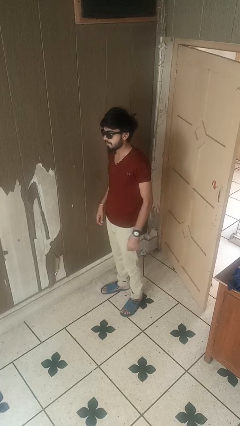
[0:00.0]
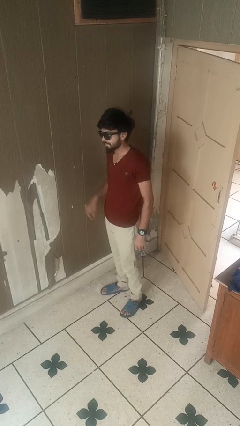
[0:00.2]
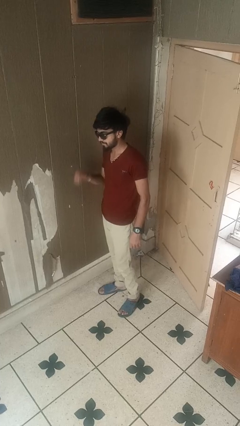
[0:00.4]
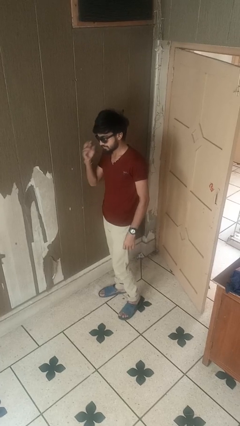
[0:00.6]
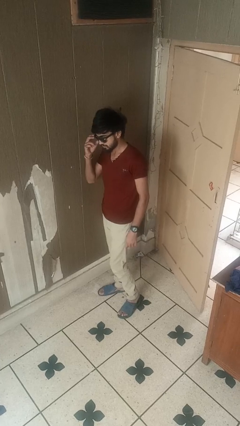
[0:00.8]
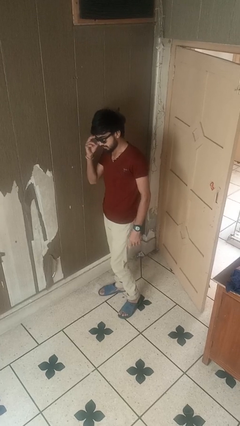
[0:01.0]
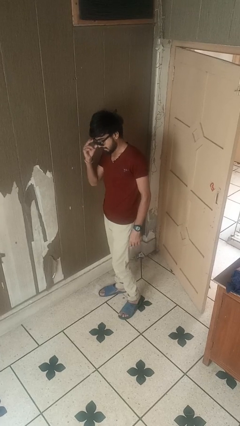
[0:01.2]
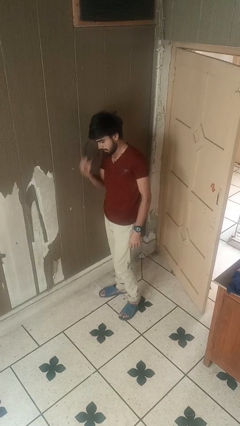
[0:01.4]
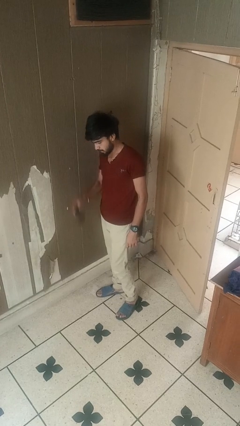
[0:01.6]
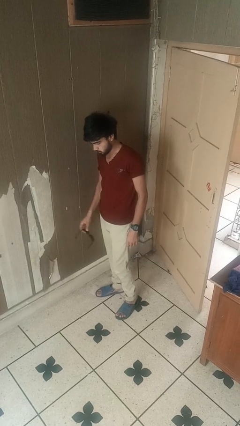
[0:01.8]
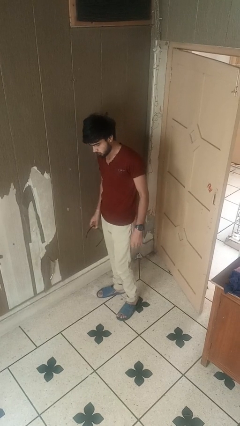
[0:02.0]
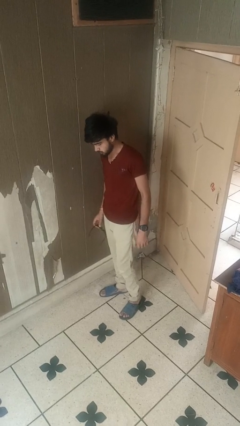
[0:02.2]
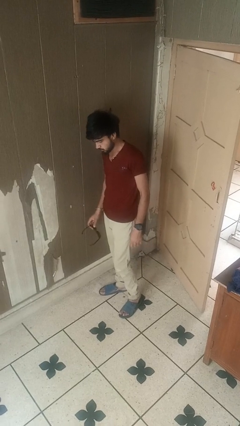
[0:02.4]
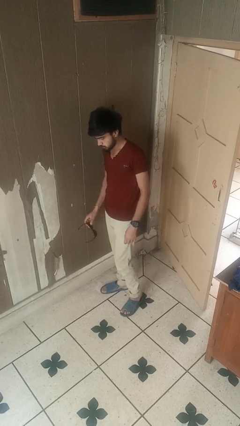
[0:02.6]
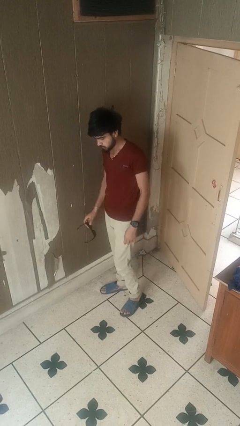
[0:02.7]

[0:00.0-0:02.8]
person takes off sunglasses

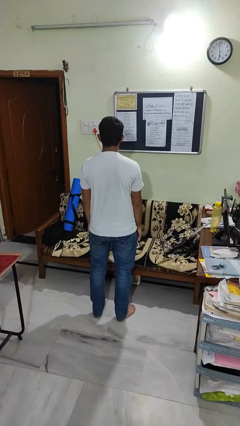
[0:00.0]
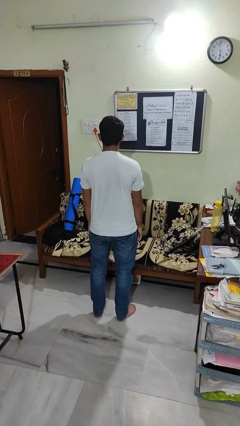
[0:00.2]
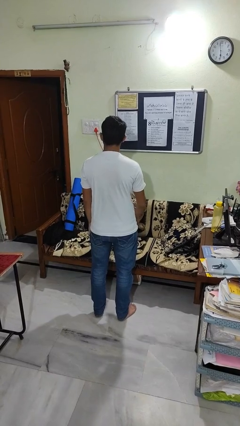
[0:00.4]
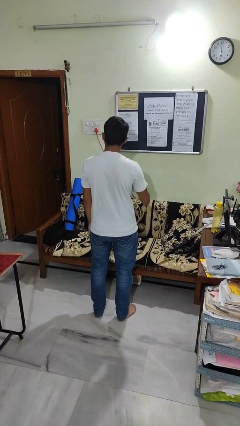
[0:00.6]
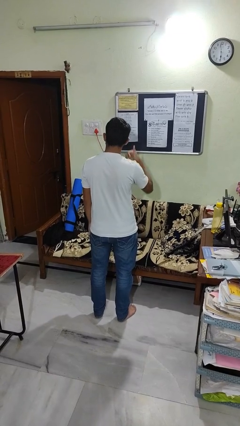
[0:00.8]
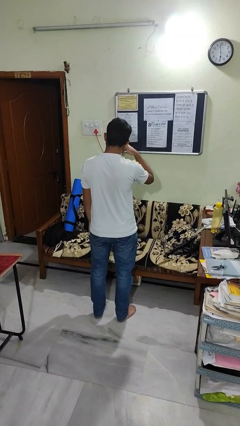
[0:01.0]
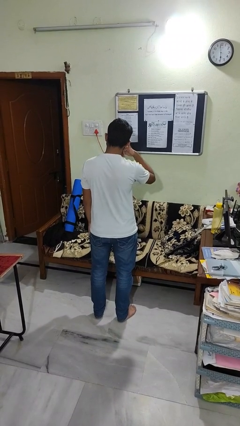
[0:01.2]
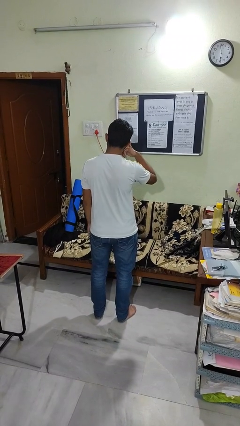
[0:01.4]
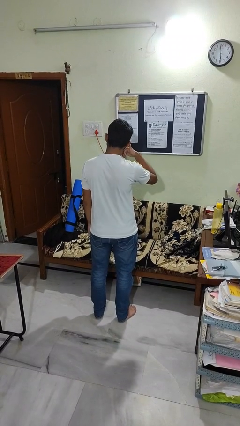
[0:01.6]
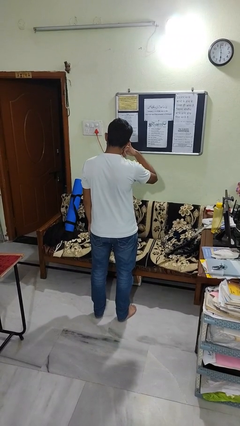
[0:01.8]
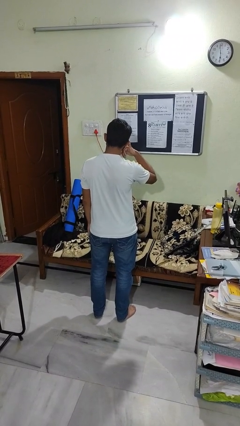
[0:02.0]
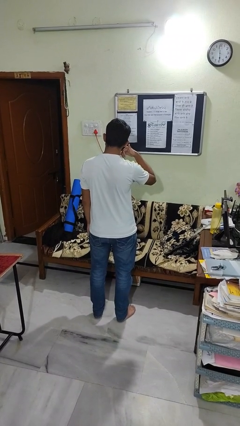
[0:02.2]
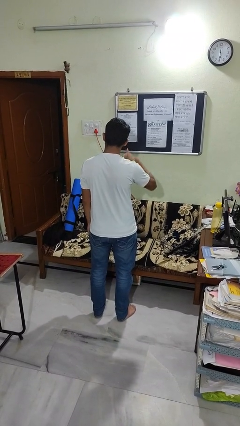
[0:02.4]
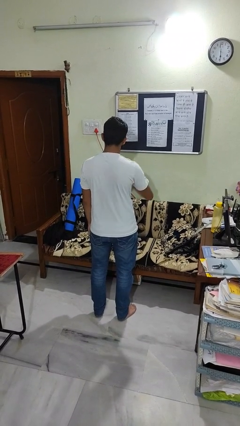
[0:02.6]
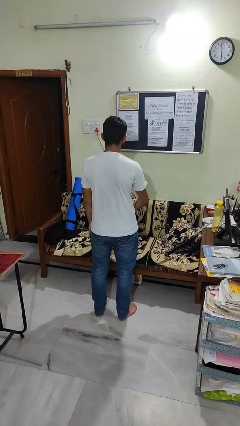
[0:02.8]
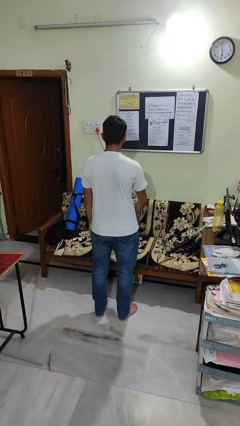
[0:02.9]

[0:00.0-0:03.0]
person gestures call me

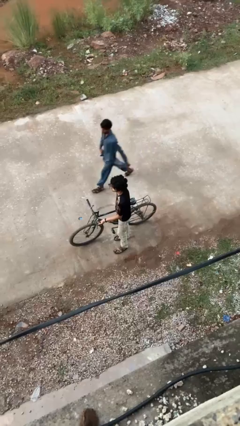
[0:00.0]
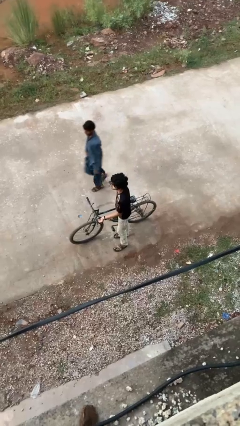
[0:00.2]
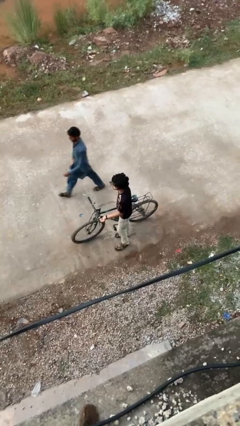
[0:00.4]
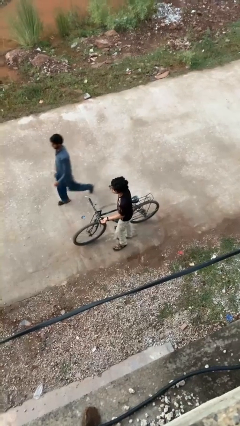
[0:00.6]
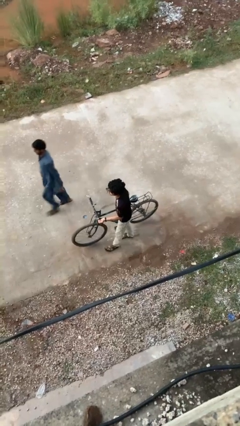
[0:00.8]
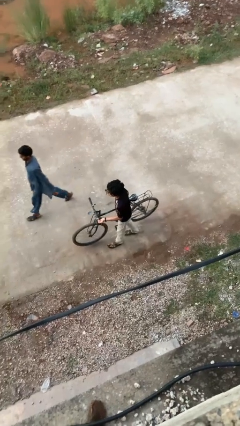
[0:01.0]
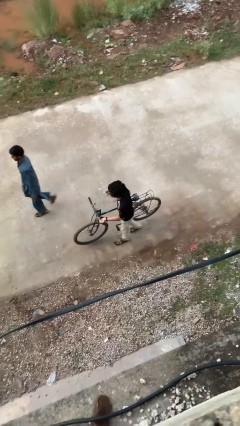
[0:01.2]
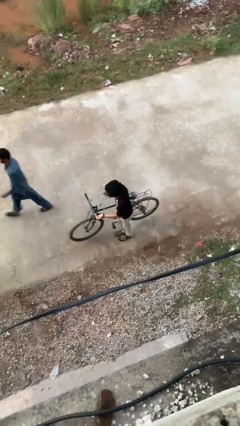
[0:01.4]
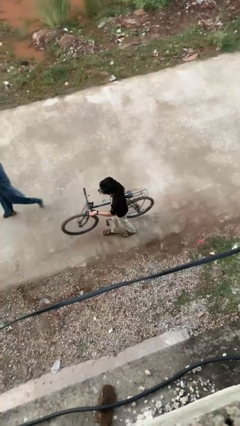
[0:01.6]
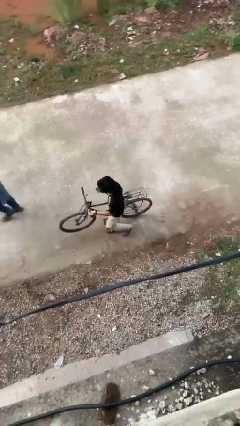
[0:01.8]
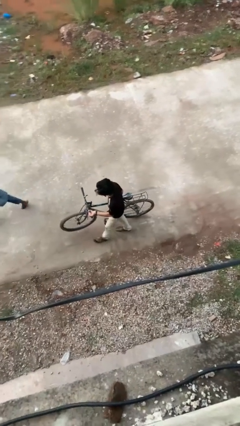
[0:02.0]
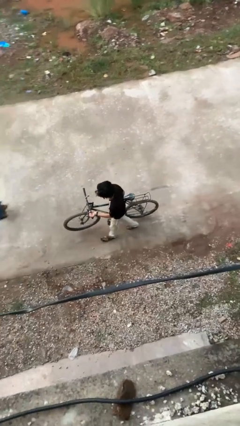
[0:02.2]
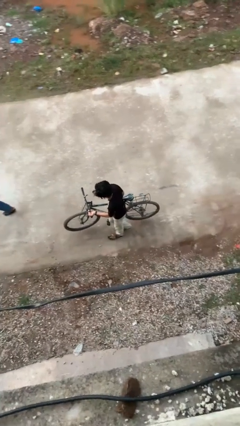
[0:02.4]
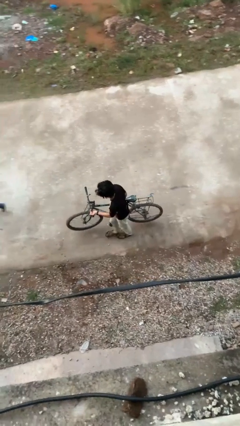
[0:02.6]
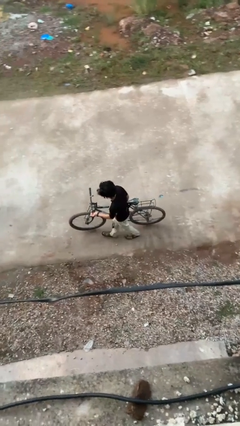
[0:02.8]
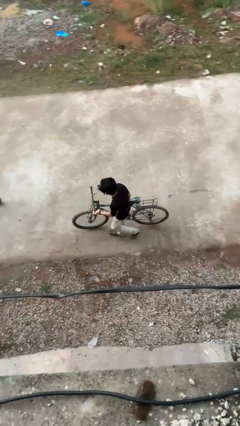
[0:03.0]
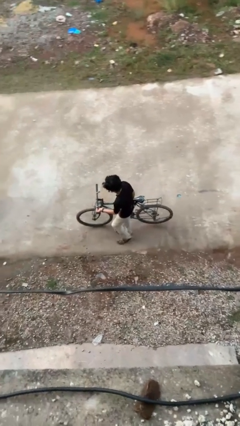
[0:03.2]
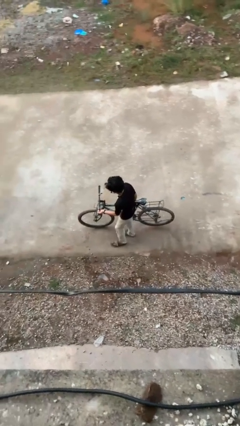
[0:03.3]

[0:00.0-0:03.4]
person carries bicycle

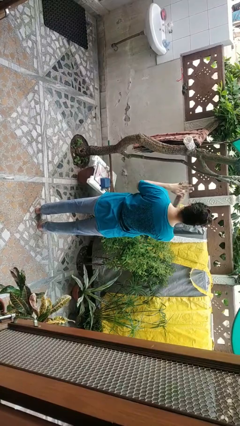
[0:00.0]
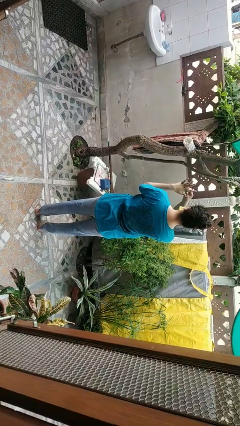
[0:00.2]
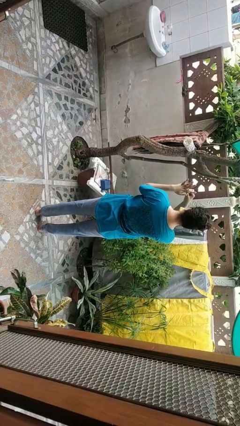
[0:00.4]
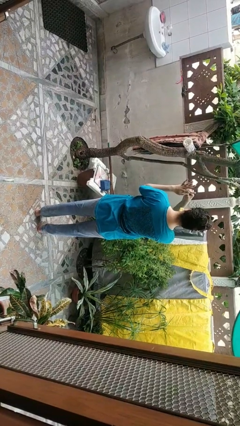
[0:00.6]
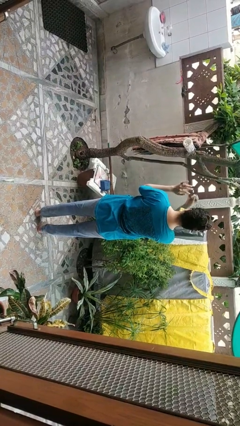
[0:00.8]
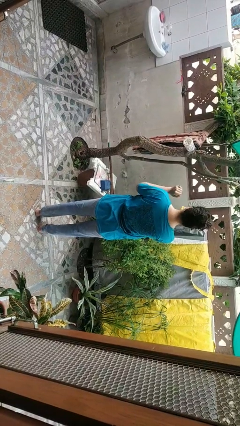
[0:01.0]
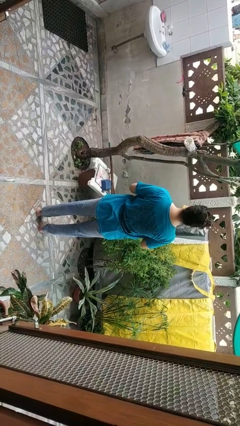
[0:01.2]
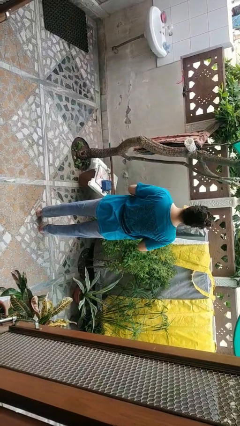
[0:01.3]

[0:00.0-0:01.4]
person takes off ring

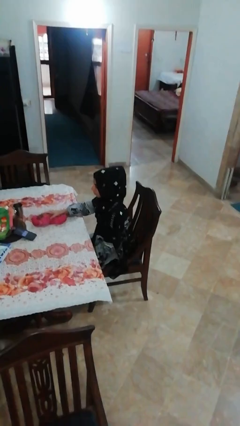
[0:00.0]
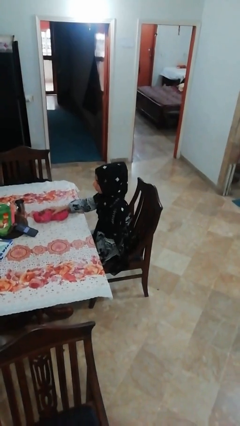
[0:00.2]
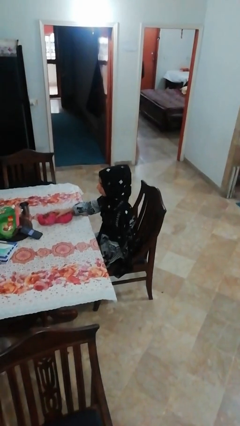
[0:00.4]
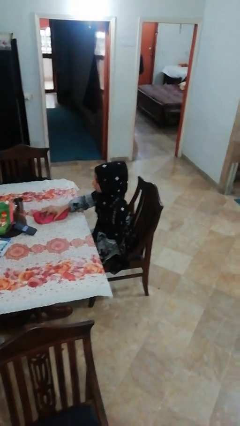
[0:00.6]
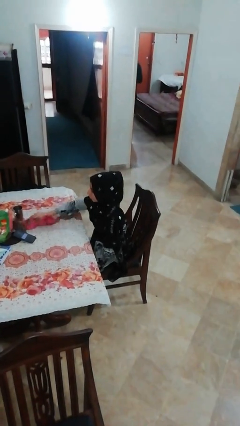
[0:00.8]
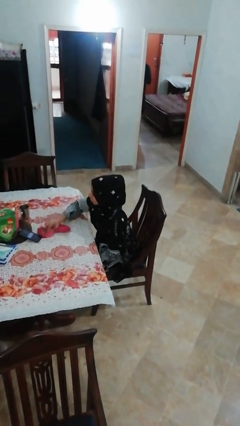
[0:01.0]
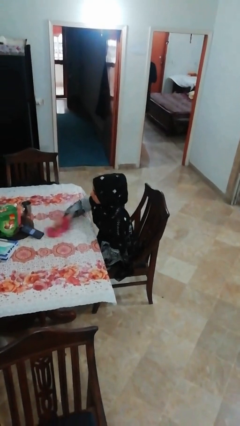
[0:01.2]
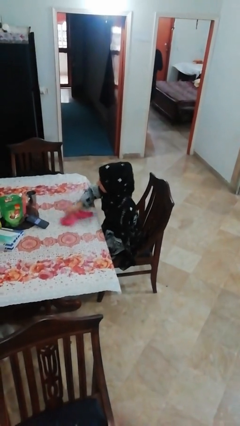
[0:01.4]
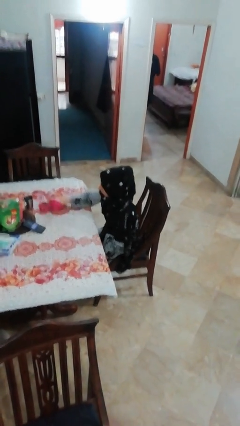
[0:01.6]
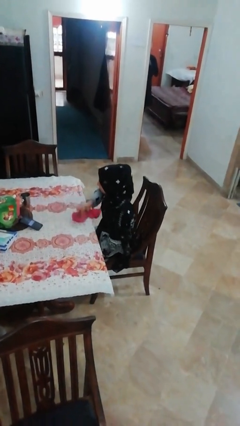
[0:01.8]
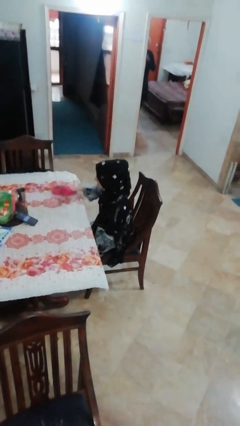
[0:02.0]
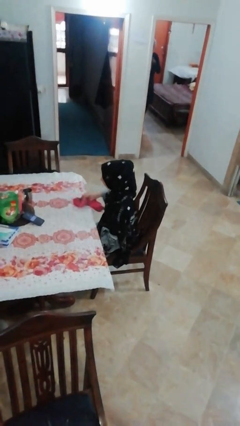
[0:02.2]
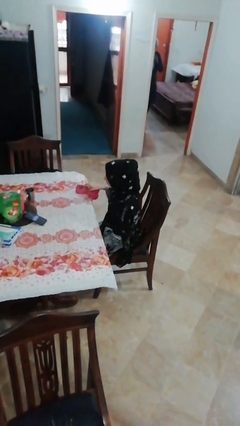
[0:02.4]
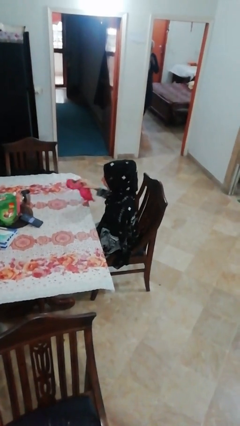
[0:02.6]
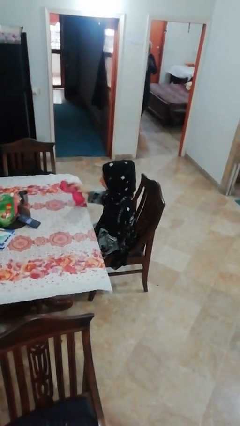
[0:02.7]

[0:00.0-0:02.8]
person cleans table with rag

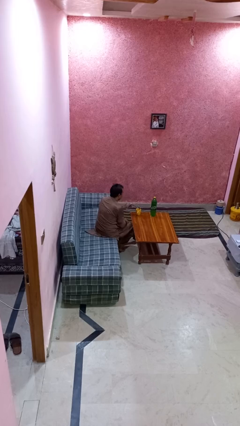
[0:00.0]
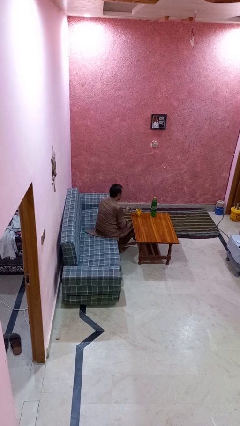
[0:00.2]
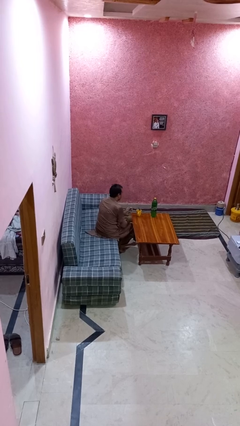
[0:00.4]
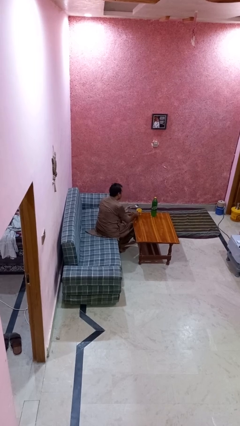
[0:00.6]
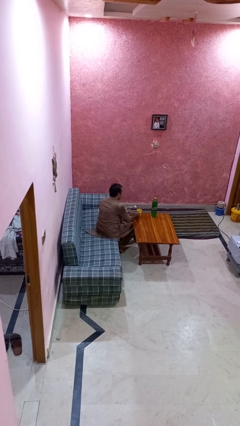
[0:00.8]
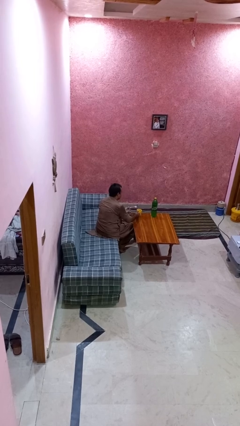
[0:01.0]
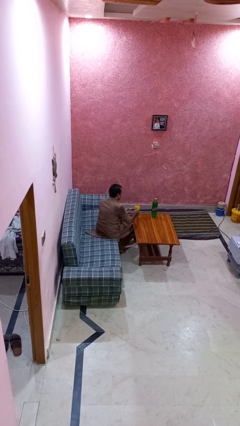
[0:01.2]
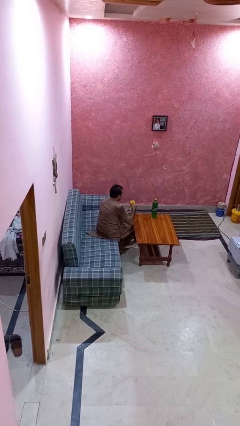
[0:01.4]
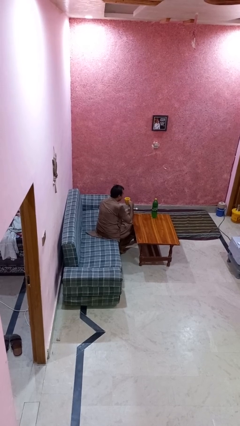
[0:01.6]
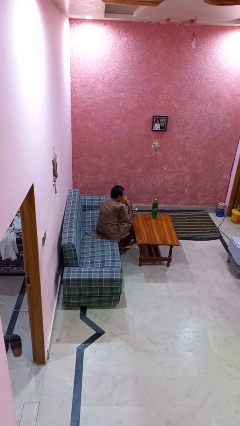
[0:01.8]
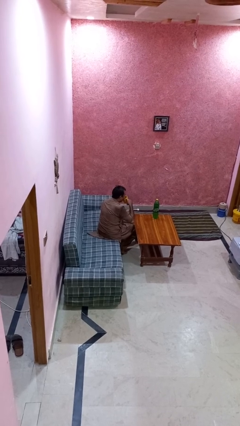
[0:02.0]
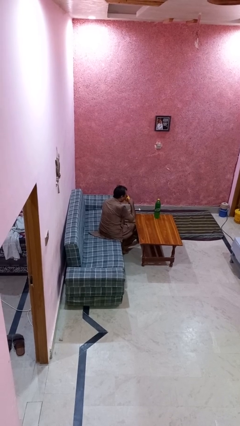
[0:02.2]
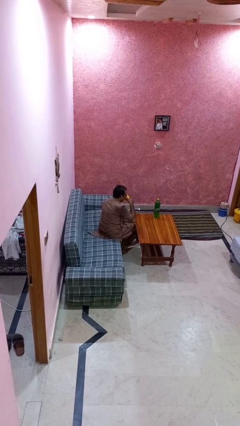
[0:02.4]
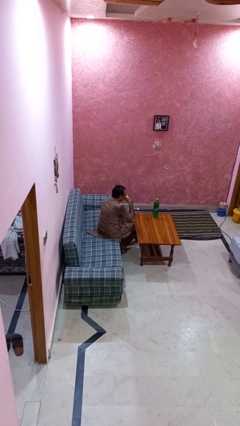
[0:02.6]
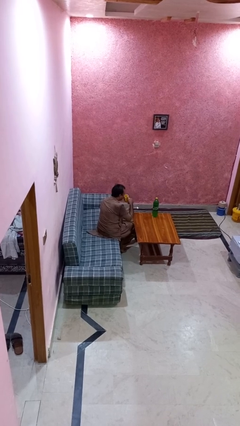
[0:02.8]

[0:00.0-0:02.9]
person drinks from mug

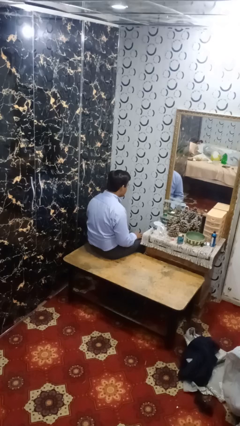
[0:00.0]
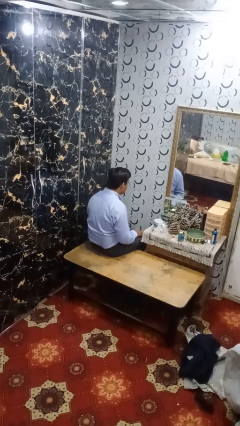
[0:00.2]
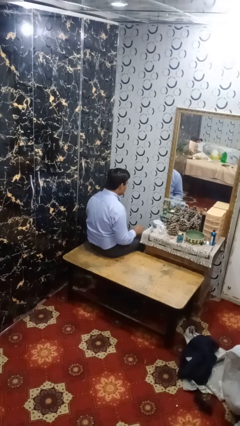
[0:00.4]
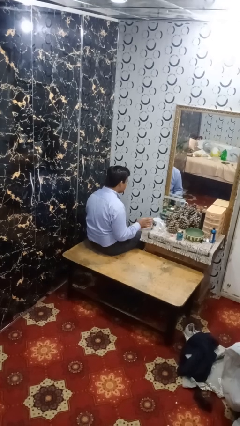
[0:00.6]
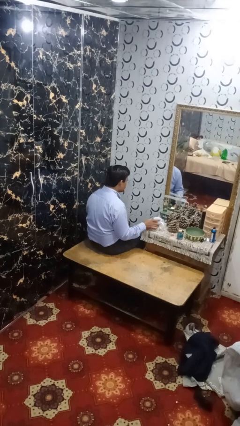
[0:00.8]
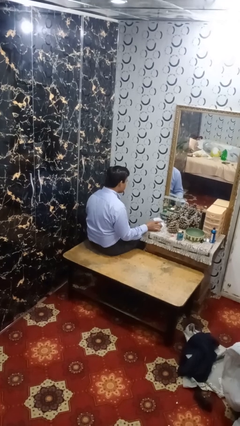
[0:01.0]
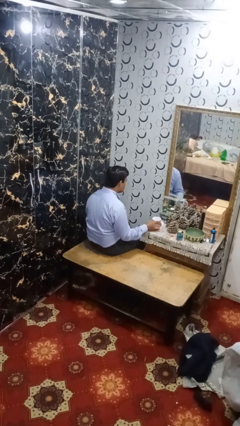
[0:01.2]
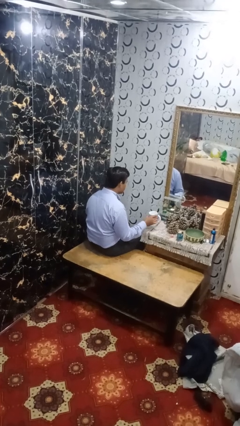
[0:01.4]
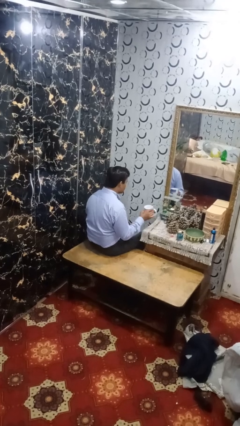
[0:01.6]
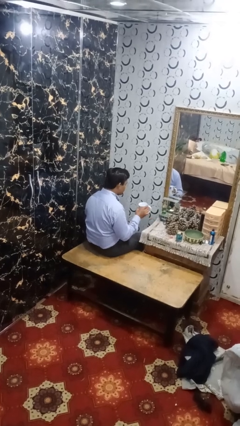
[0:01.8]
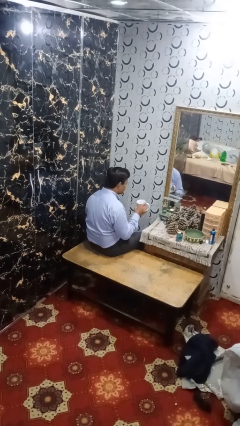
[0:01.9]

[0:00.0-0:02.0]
person picks up object from table
